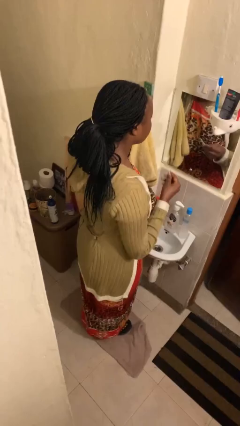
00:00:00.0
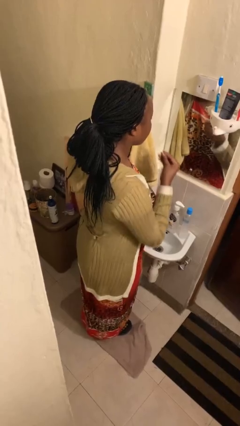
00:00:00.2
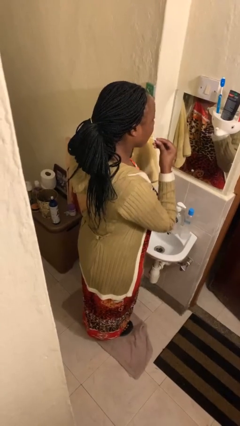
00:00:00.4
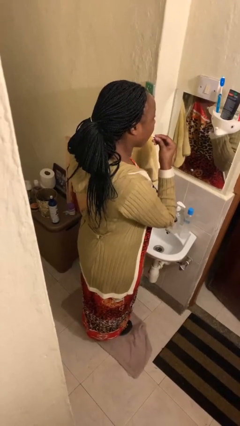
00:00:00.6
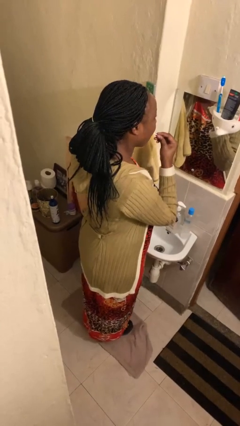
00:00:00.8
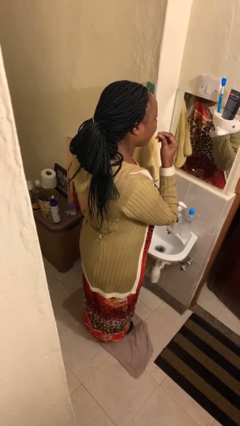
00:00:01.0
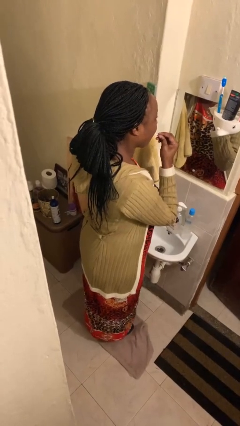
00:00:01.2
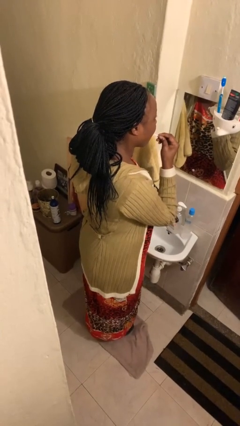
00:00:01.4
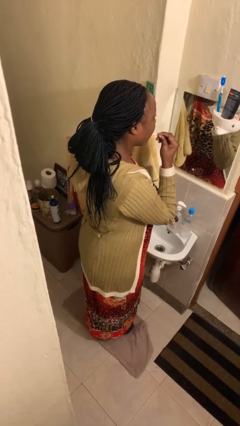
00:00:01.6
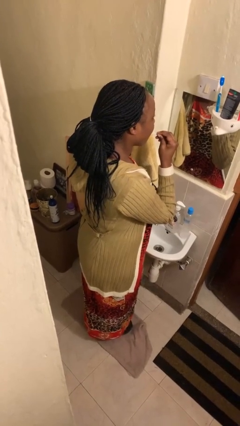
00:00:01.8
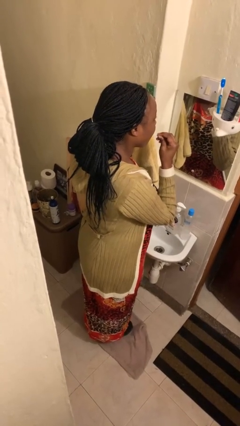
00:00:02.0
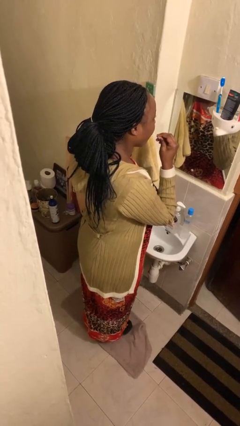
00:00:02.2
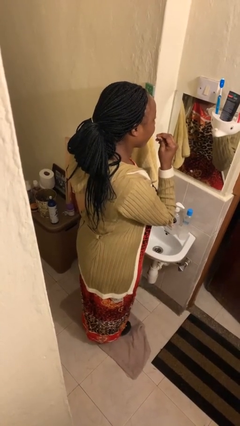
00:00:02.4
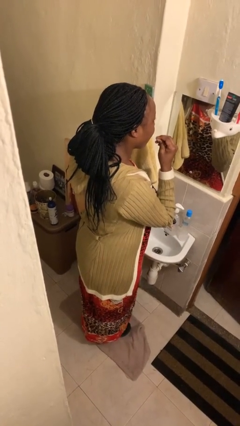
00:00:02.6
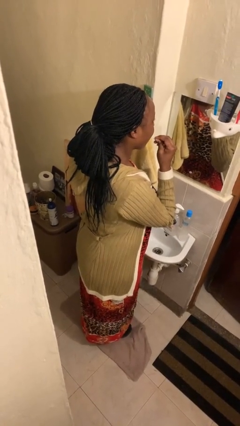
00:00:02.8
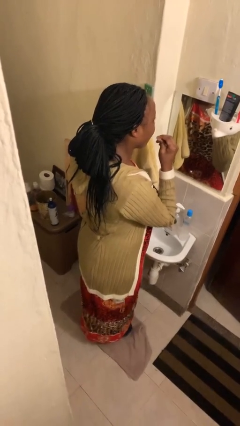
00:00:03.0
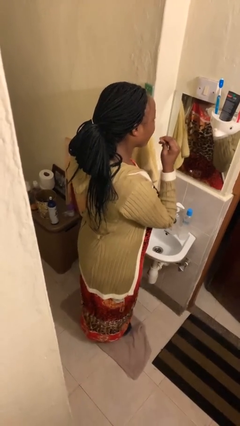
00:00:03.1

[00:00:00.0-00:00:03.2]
person flosses

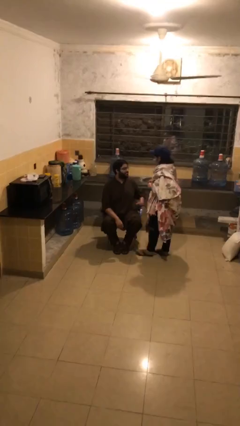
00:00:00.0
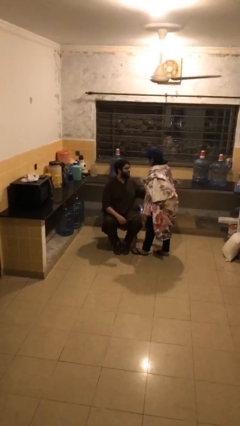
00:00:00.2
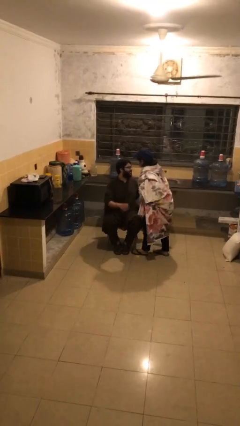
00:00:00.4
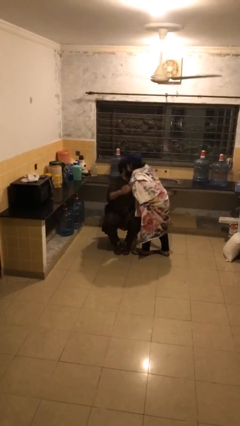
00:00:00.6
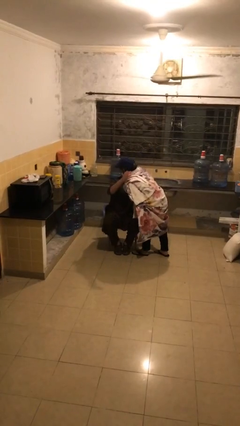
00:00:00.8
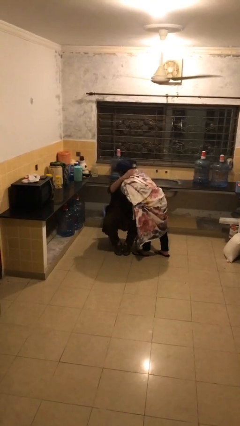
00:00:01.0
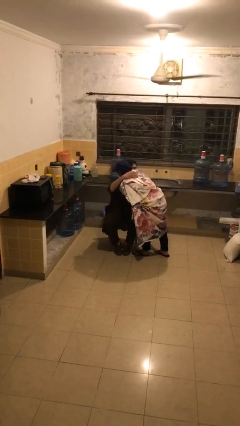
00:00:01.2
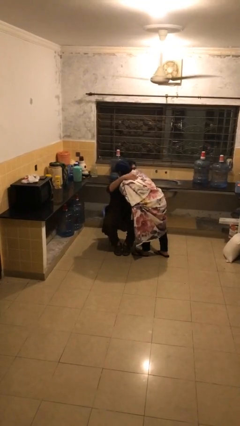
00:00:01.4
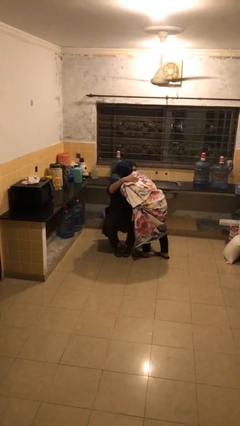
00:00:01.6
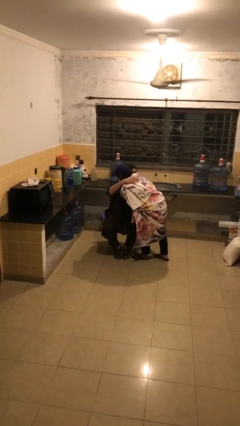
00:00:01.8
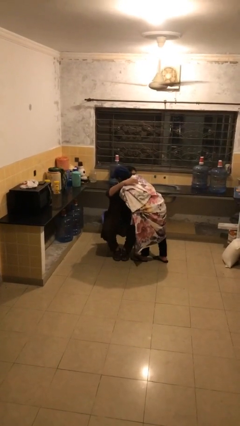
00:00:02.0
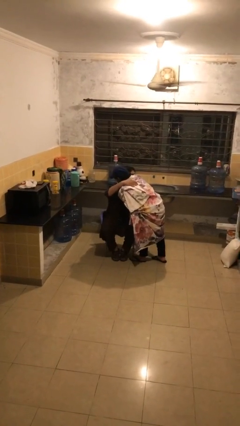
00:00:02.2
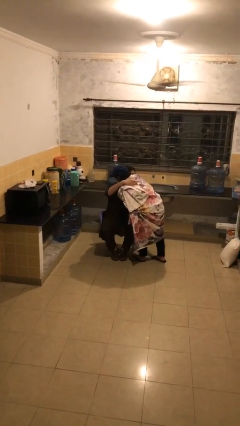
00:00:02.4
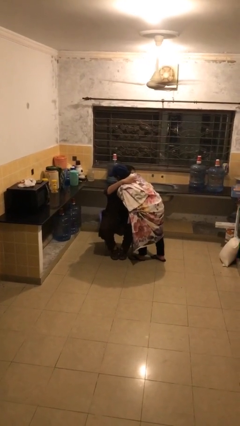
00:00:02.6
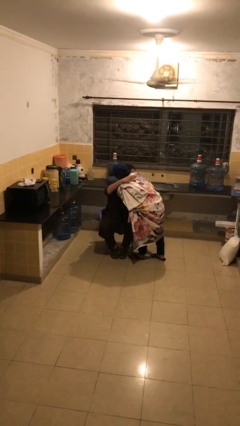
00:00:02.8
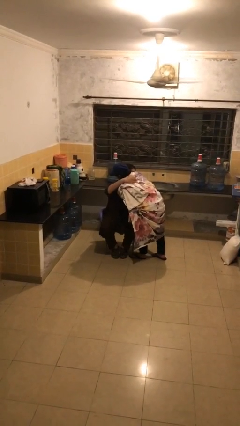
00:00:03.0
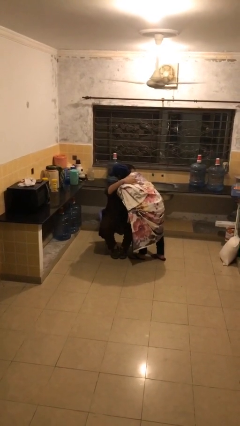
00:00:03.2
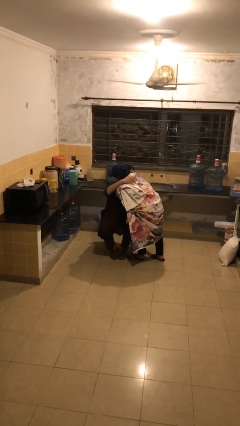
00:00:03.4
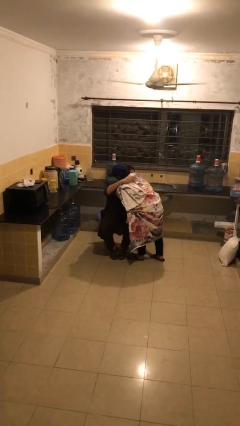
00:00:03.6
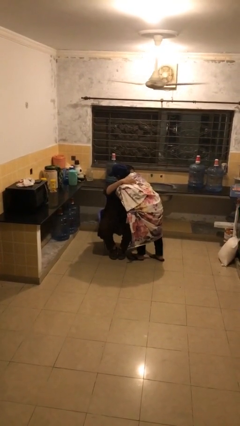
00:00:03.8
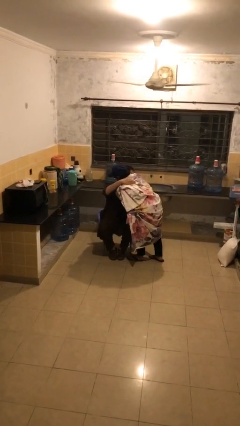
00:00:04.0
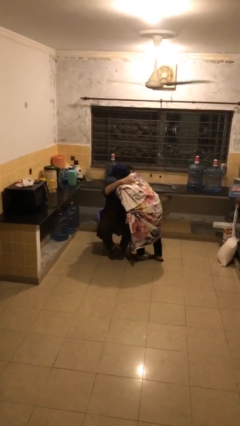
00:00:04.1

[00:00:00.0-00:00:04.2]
person embraces person

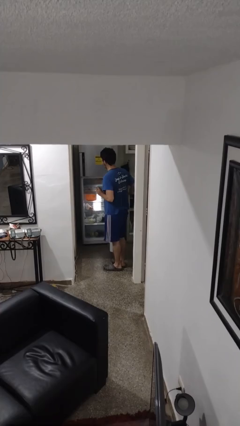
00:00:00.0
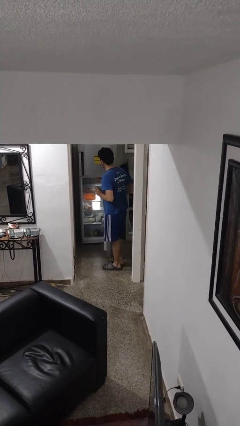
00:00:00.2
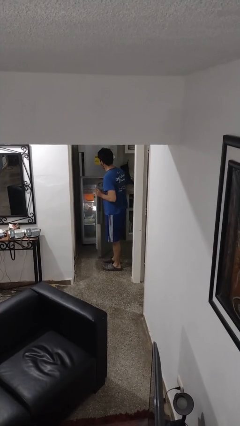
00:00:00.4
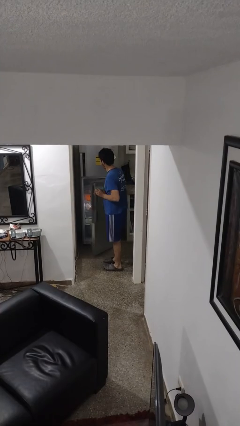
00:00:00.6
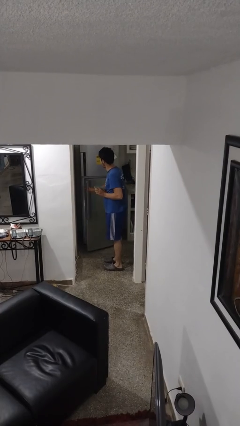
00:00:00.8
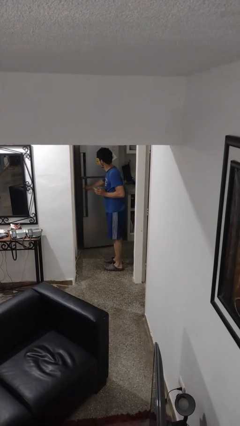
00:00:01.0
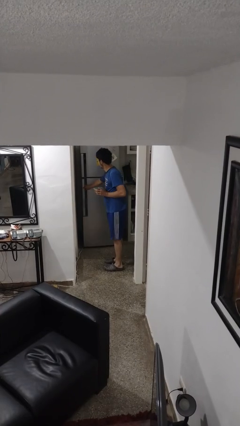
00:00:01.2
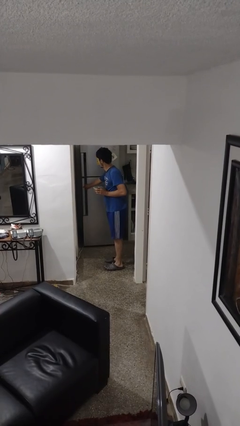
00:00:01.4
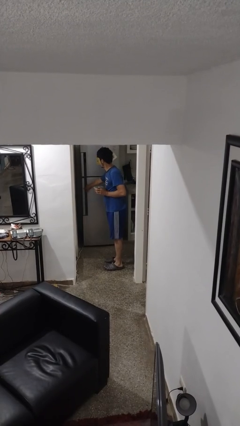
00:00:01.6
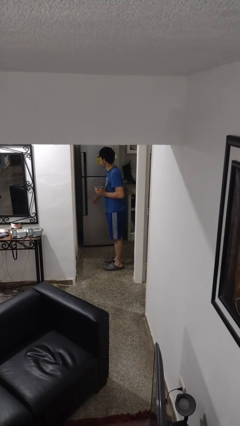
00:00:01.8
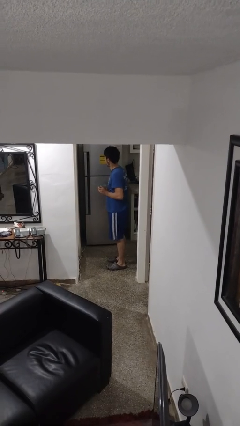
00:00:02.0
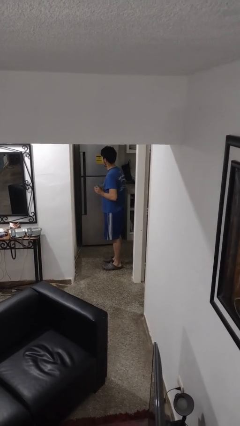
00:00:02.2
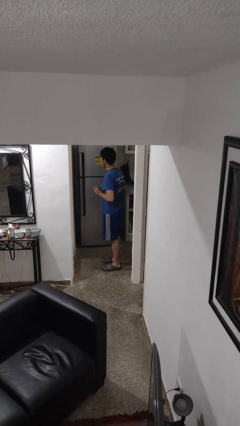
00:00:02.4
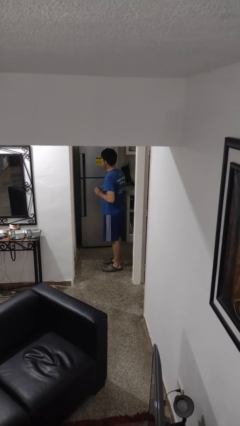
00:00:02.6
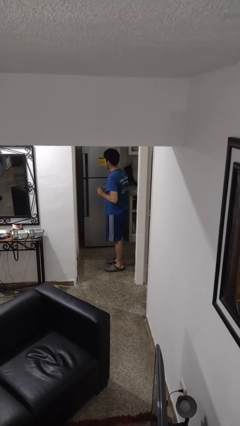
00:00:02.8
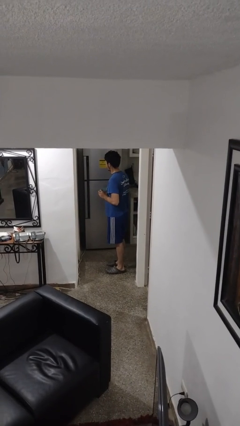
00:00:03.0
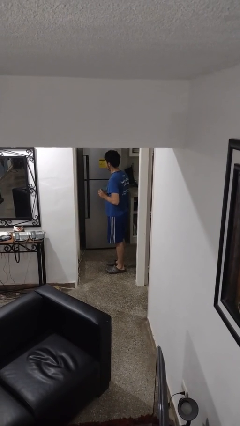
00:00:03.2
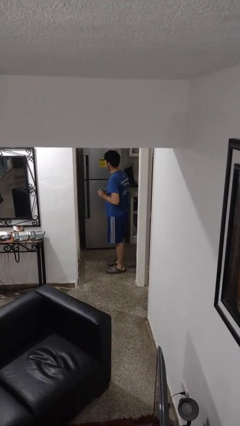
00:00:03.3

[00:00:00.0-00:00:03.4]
person closes refrigerator

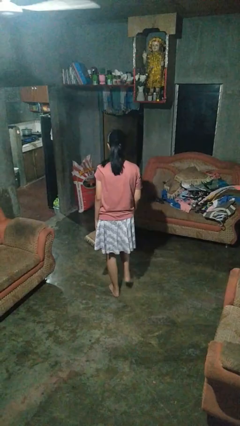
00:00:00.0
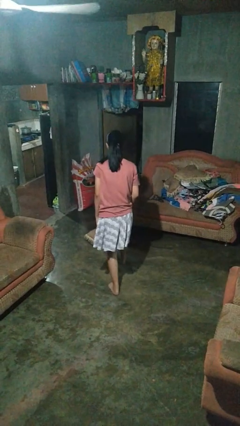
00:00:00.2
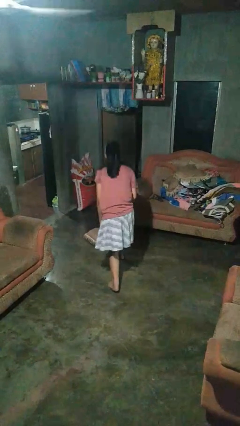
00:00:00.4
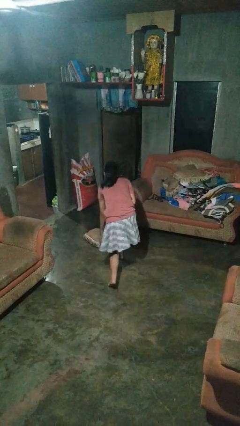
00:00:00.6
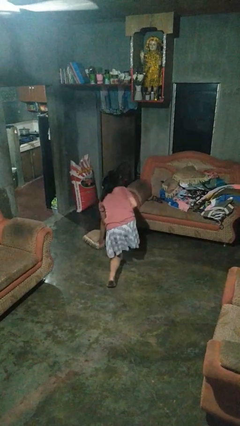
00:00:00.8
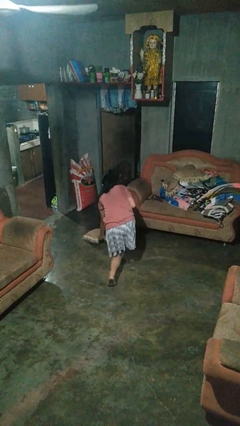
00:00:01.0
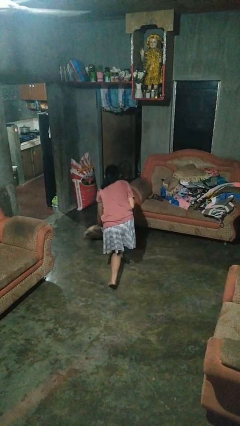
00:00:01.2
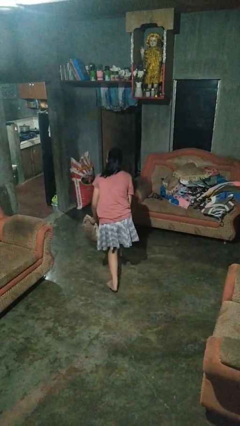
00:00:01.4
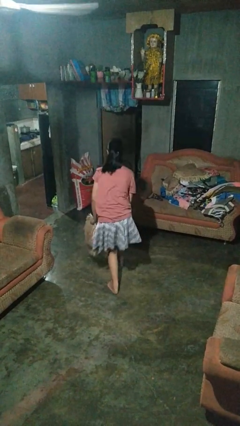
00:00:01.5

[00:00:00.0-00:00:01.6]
person picks up object from floor

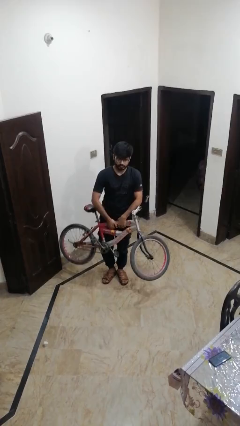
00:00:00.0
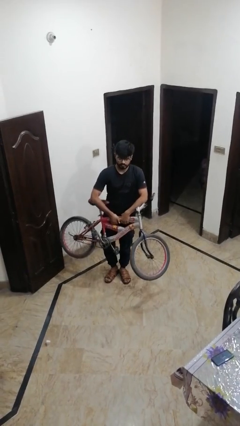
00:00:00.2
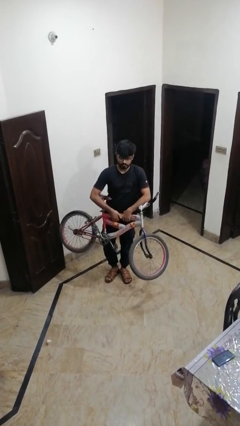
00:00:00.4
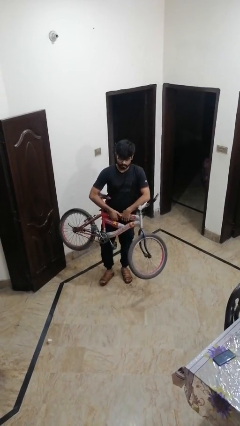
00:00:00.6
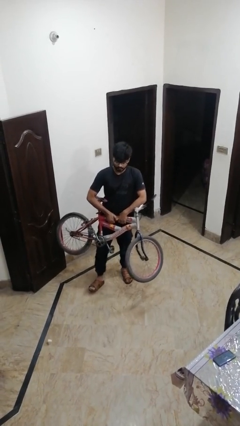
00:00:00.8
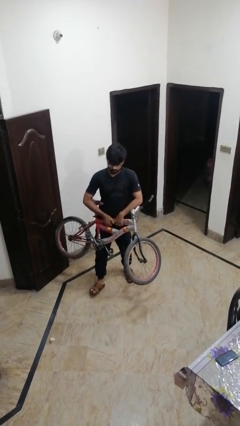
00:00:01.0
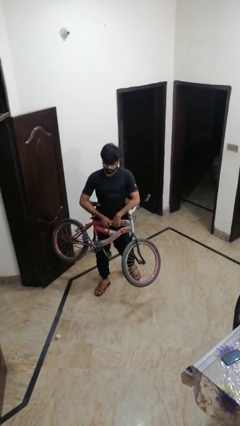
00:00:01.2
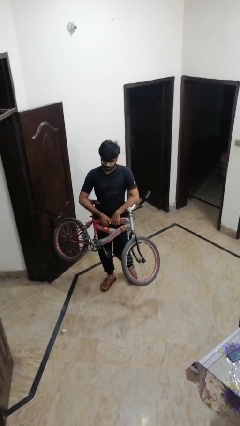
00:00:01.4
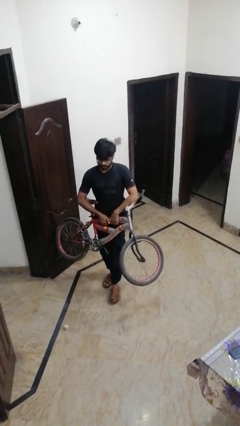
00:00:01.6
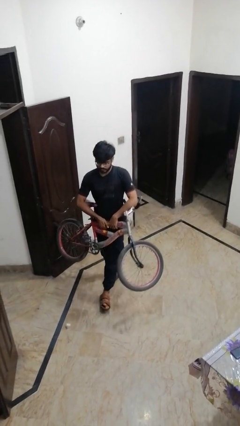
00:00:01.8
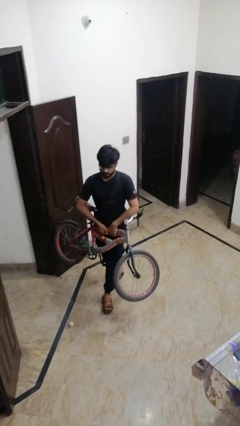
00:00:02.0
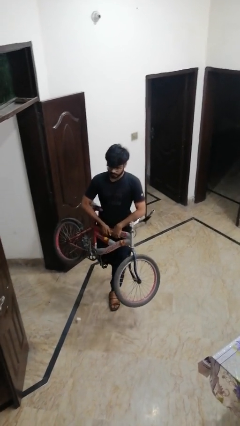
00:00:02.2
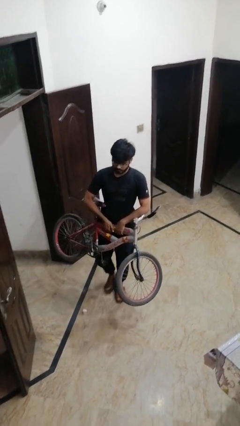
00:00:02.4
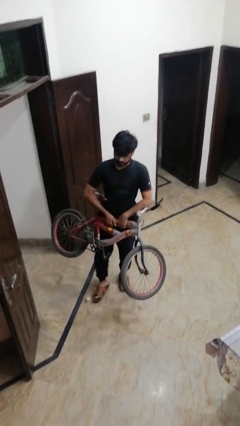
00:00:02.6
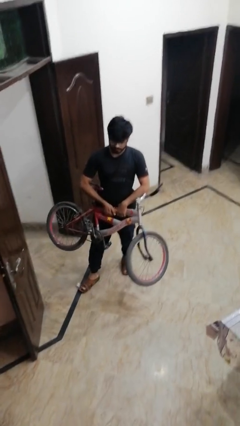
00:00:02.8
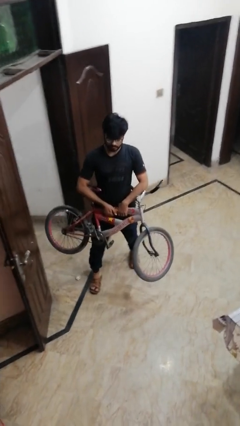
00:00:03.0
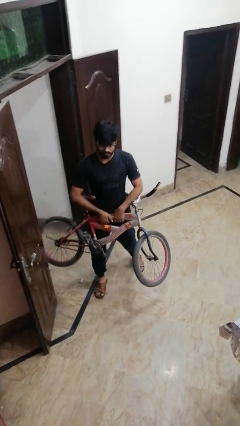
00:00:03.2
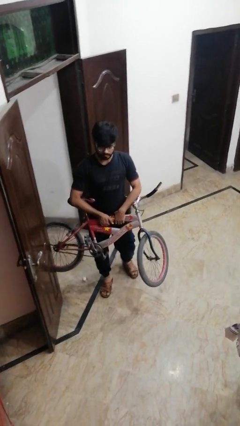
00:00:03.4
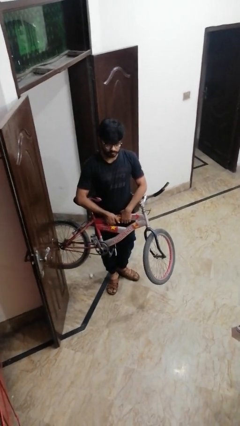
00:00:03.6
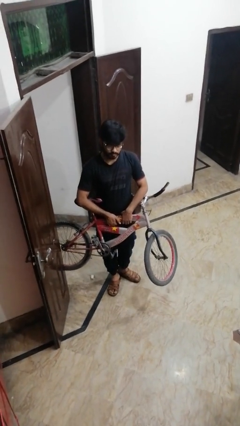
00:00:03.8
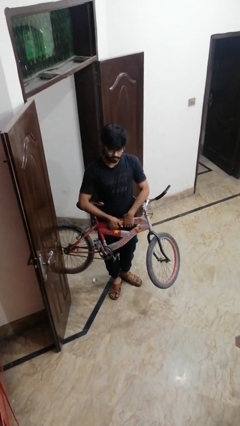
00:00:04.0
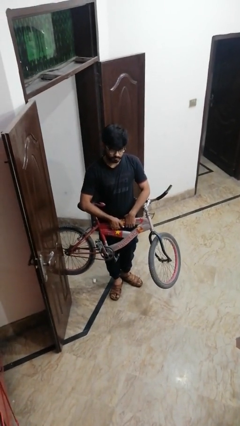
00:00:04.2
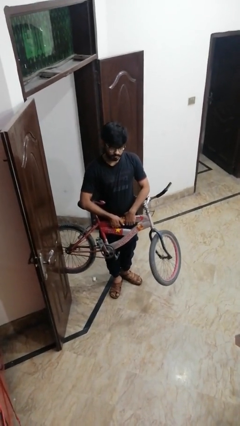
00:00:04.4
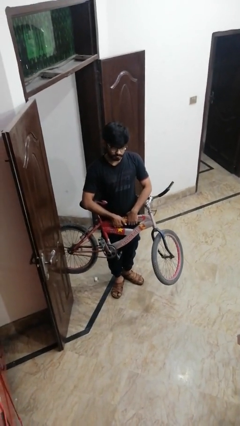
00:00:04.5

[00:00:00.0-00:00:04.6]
person carries bicycle

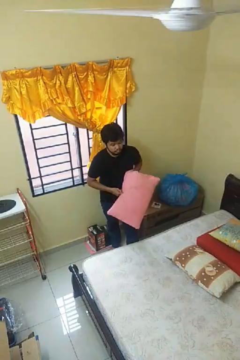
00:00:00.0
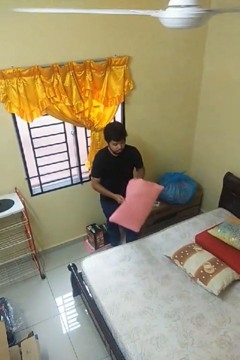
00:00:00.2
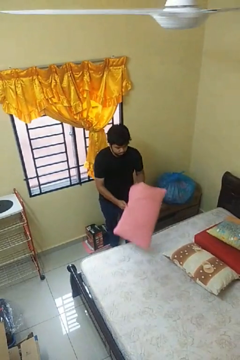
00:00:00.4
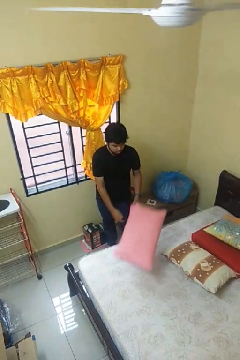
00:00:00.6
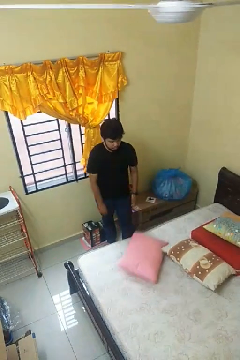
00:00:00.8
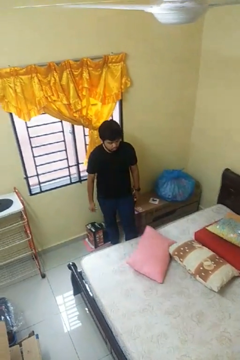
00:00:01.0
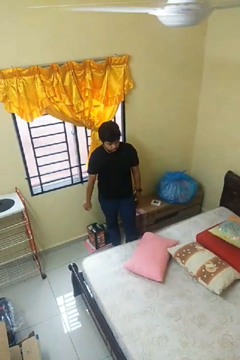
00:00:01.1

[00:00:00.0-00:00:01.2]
person puts down object on bed
